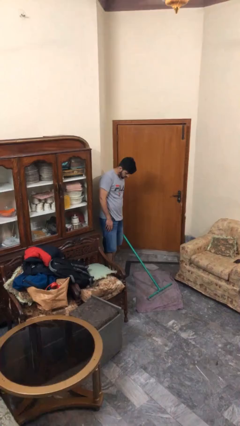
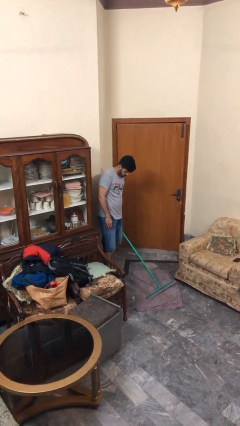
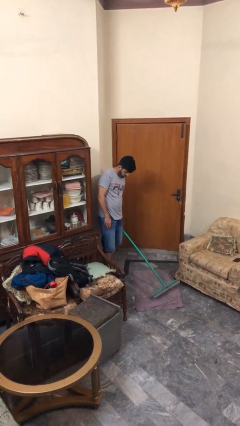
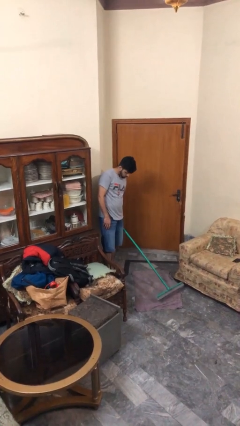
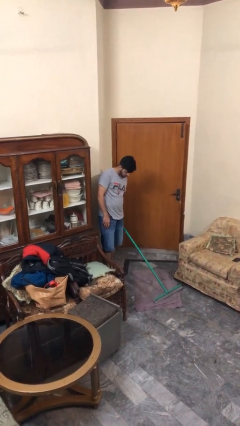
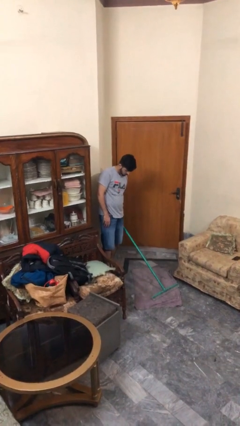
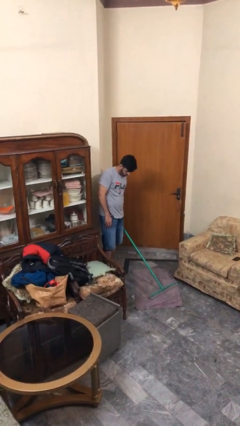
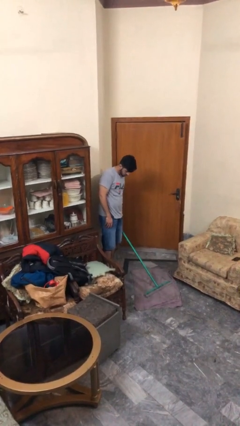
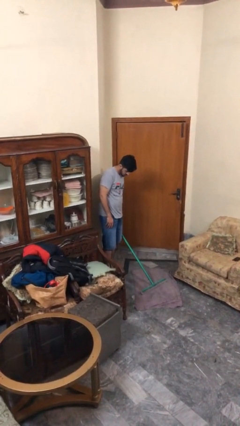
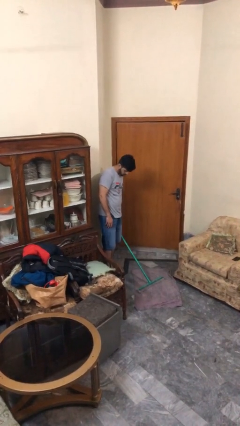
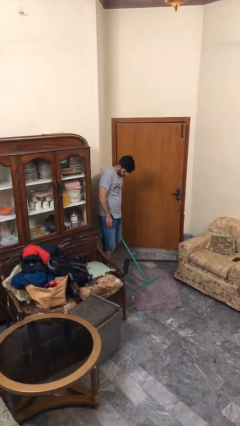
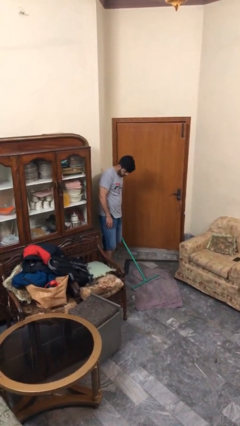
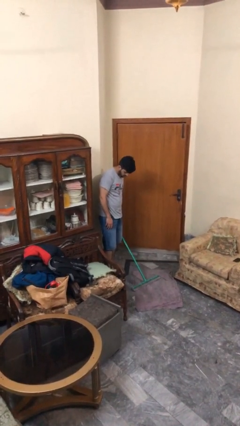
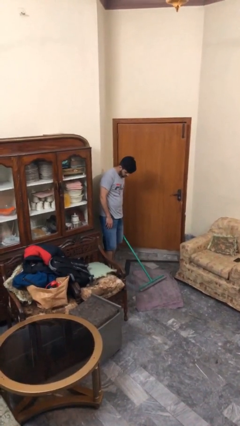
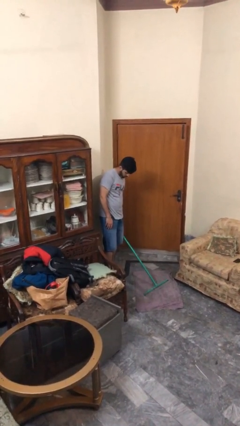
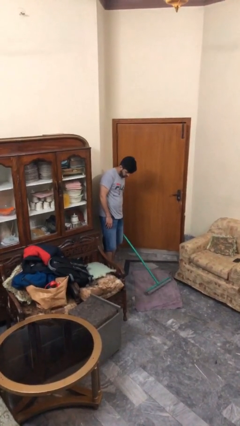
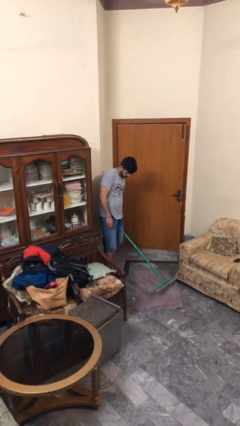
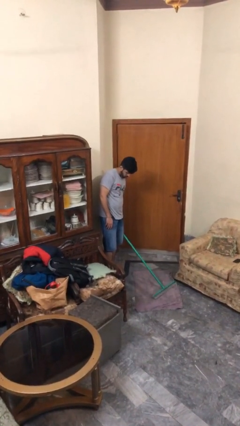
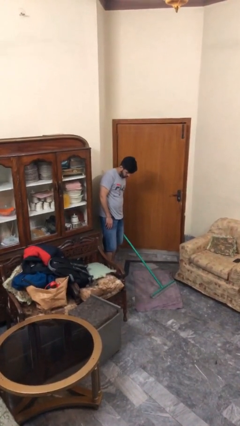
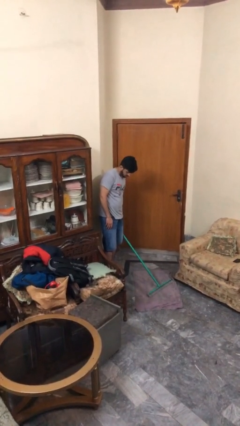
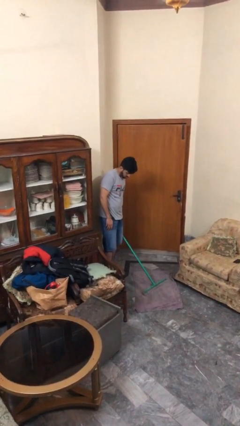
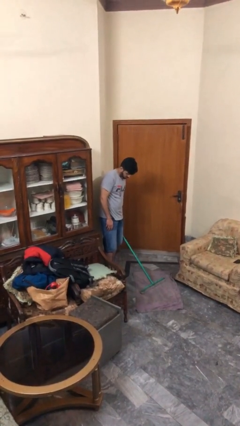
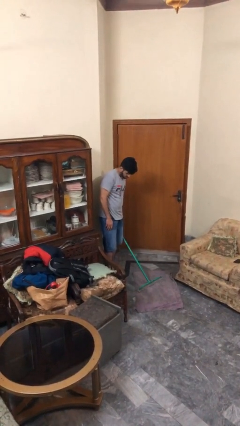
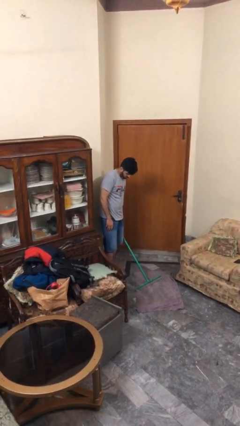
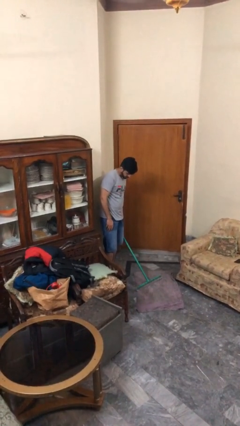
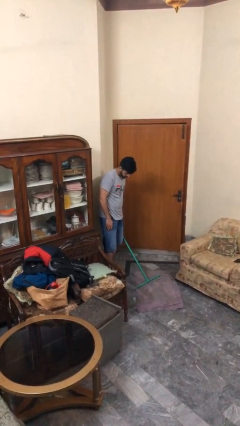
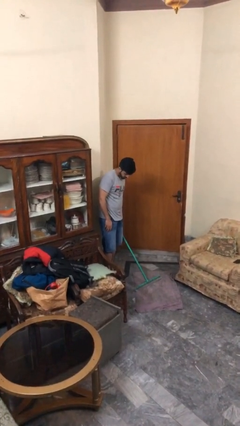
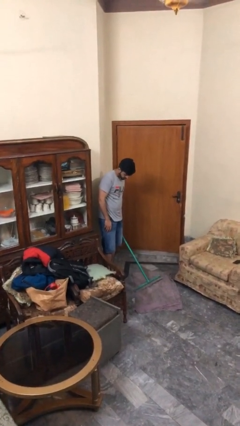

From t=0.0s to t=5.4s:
person vacuums carpet

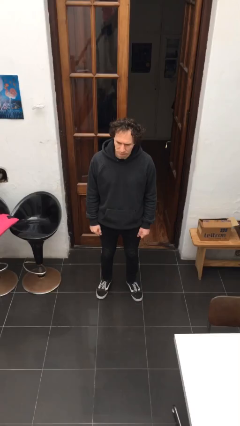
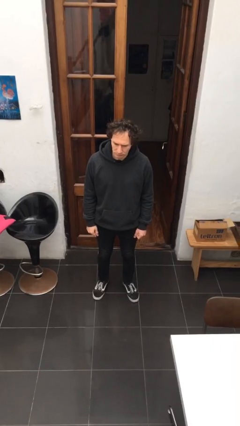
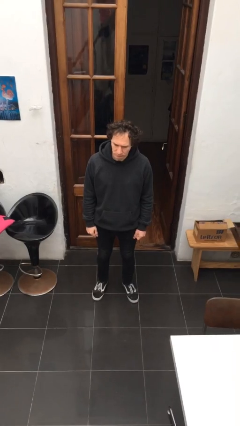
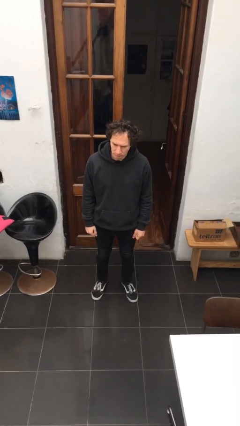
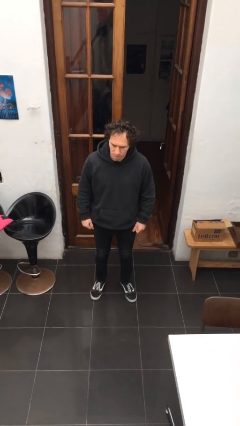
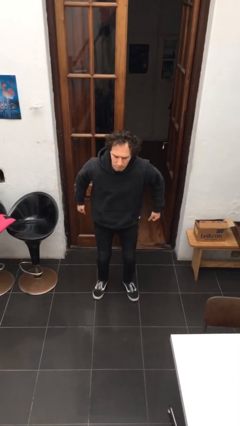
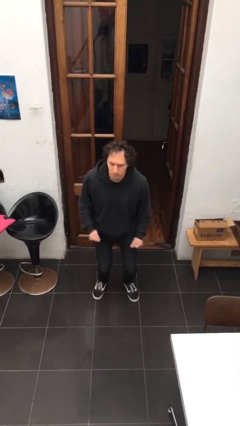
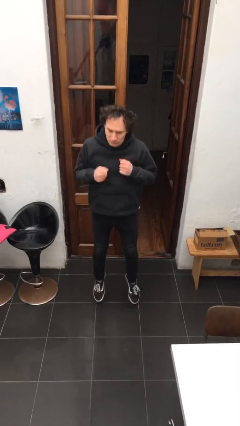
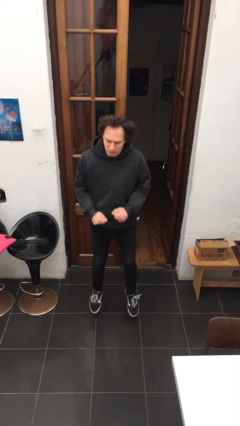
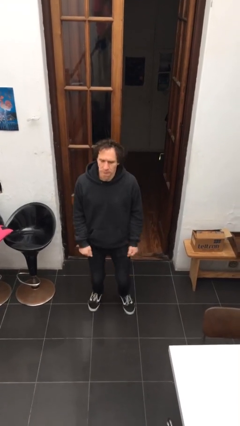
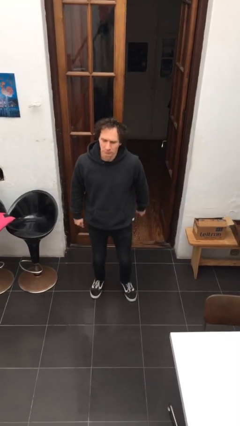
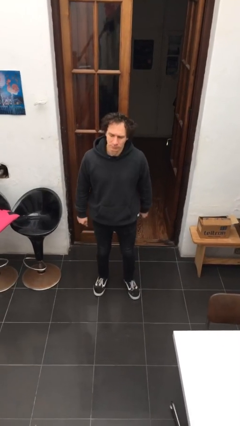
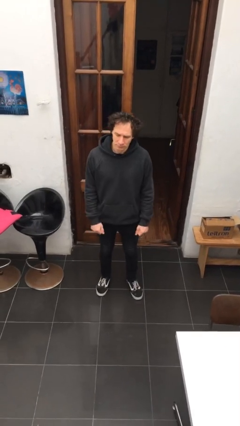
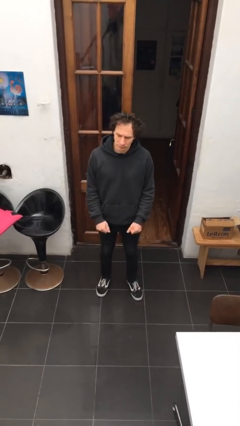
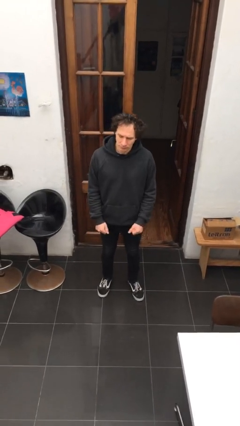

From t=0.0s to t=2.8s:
person jumps

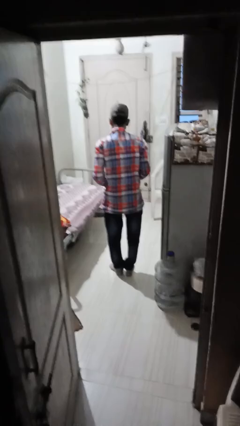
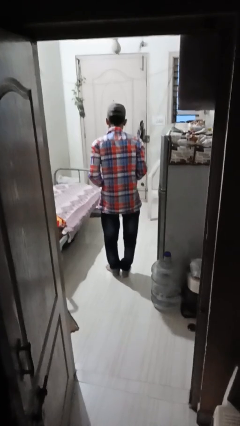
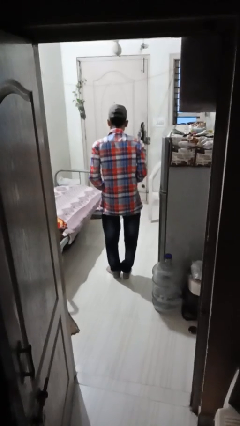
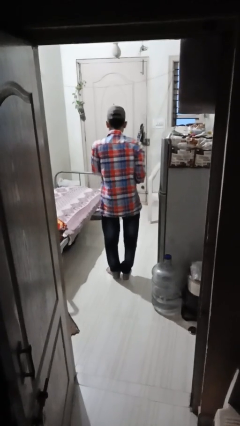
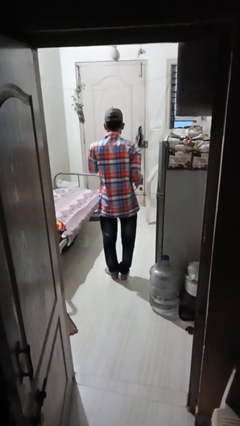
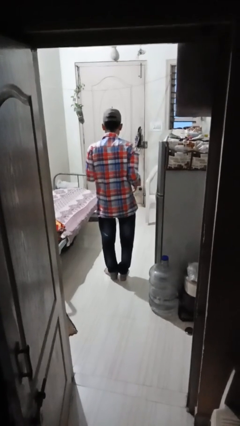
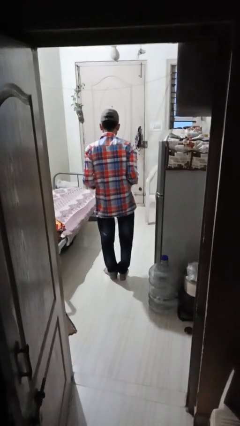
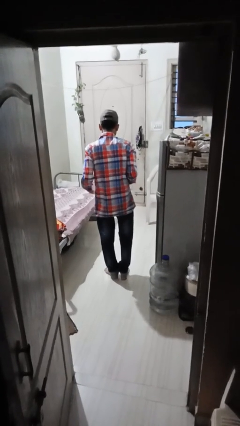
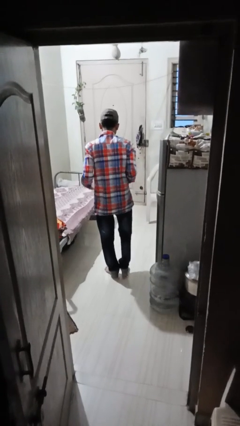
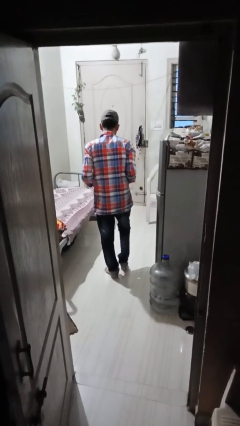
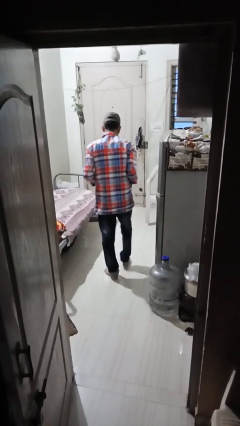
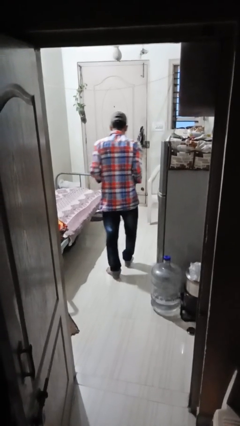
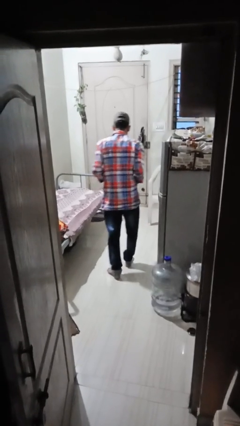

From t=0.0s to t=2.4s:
person throws object to ground

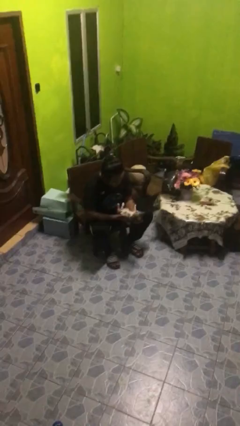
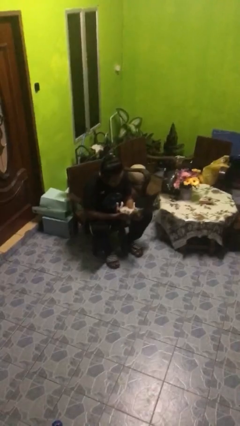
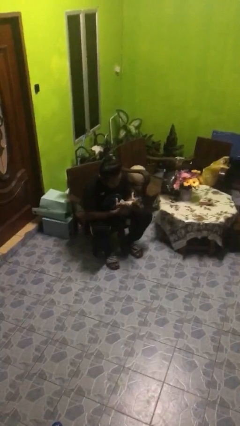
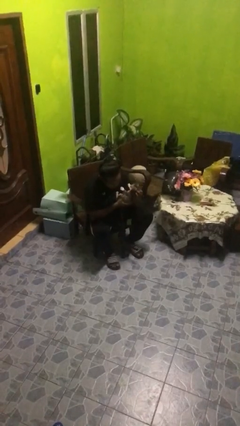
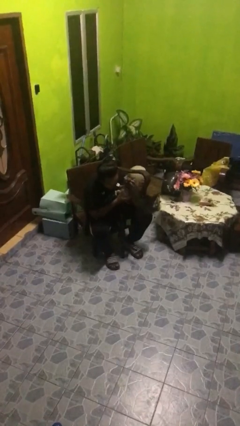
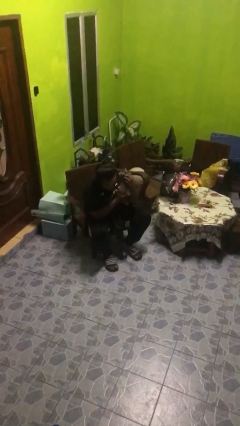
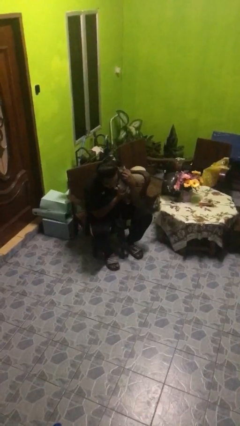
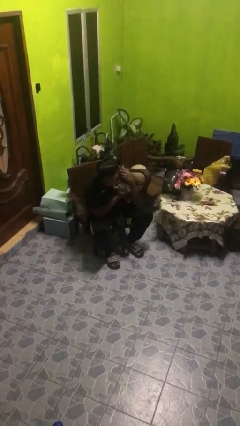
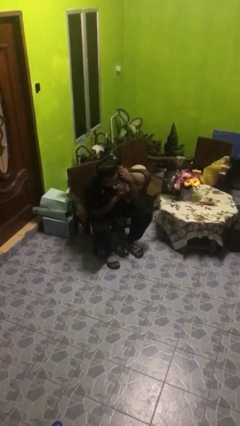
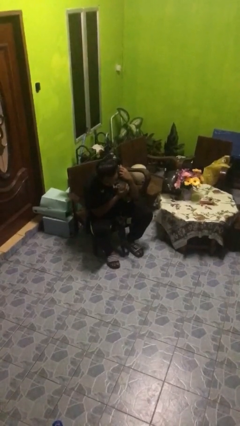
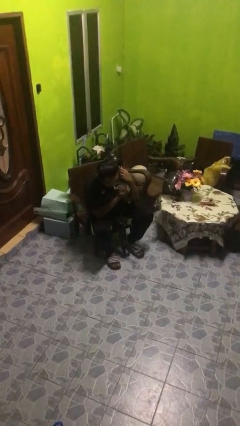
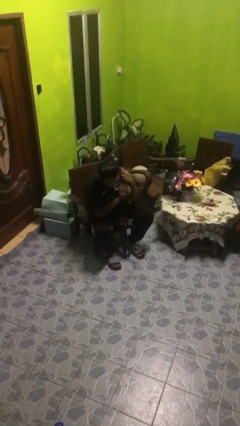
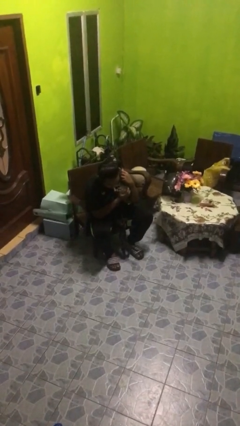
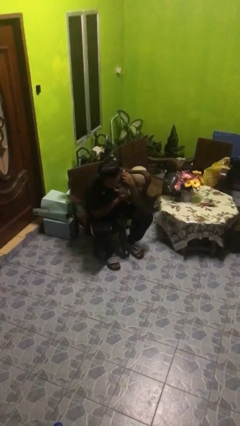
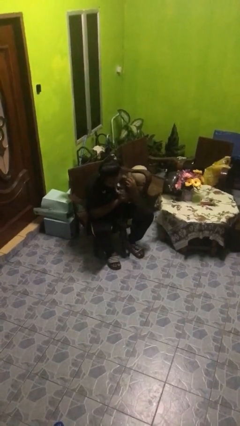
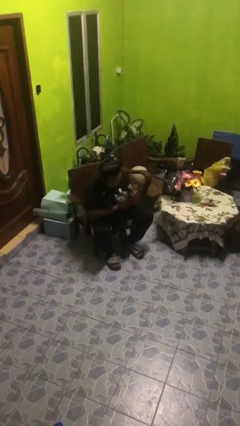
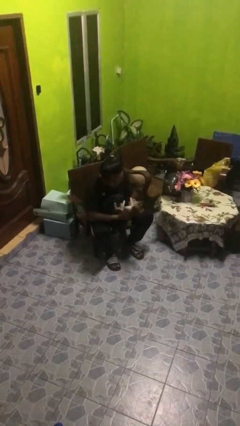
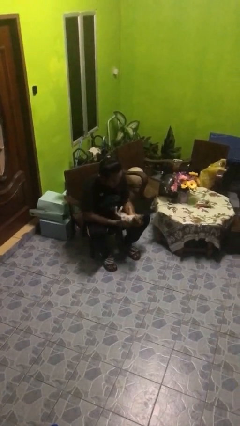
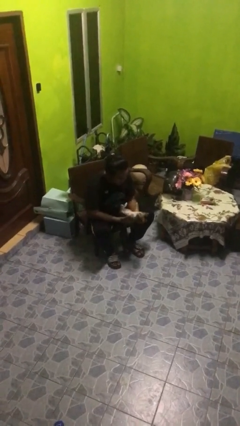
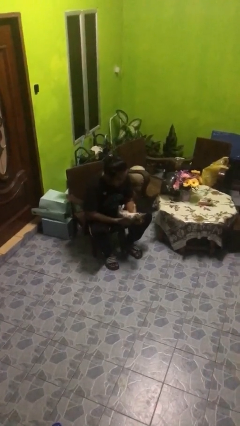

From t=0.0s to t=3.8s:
person hugs cat

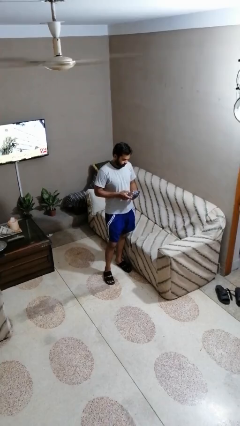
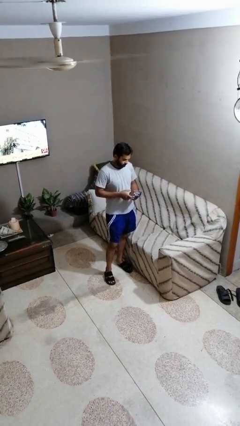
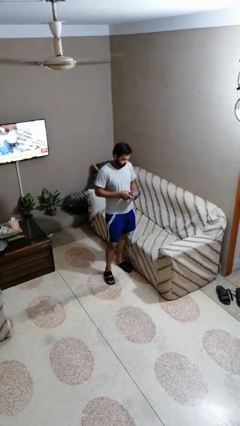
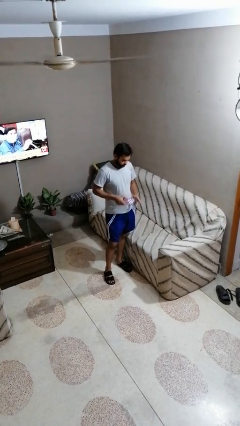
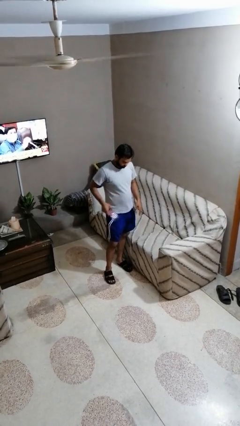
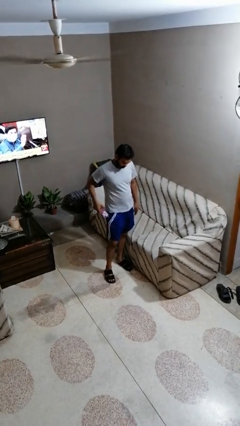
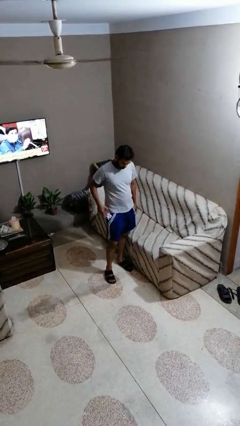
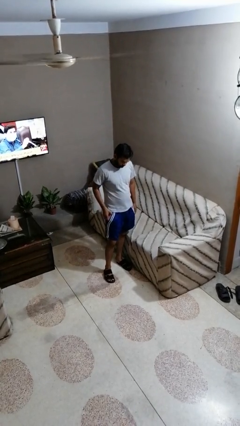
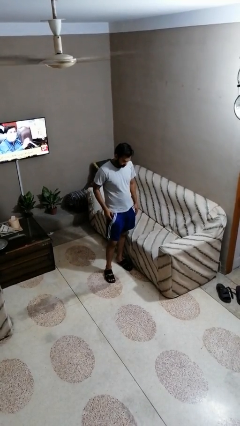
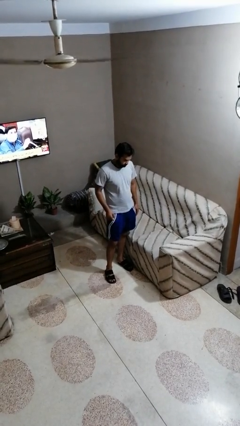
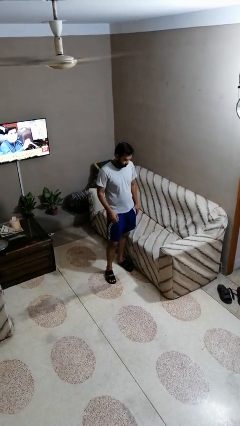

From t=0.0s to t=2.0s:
person puts phone into pocket

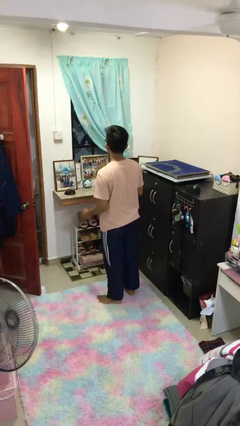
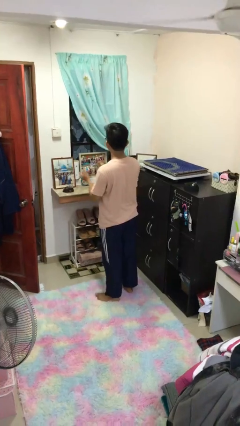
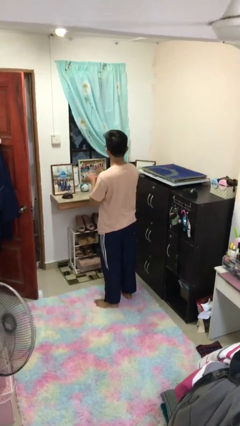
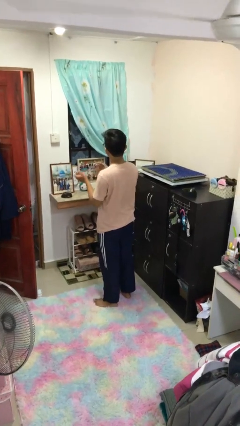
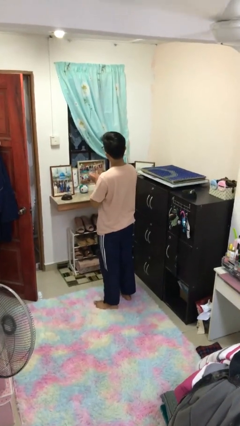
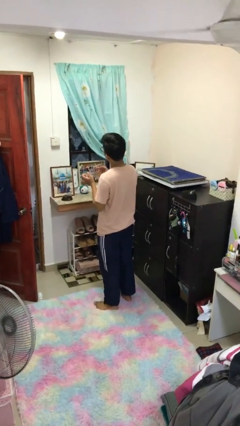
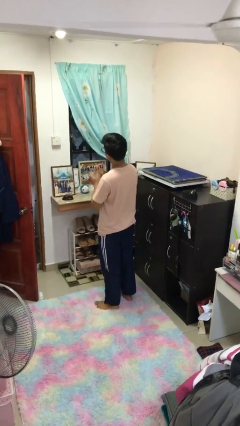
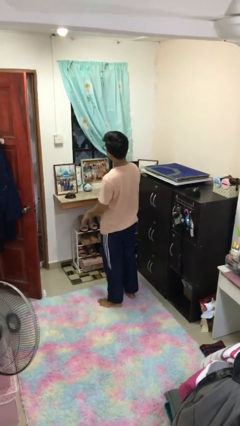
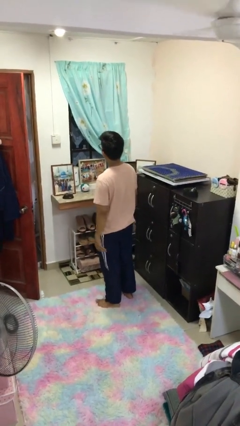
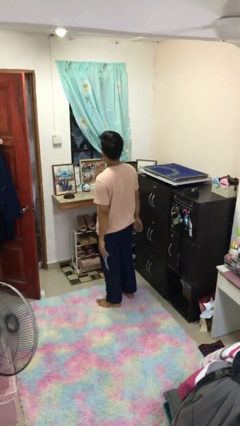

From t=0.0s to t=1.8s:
person claps hands
